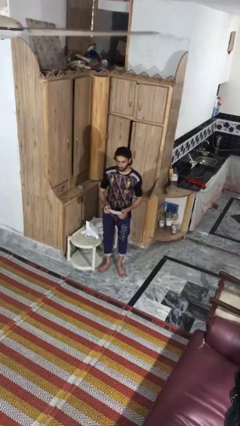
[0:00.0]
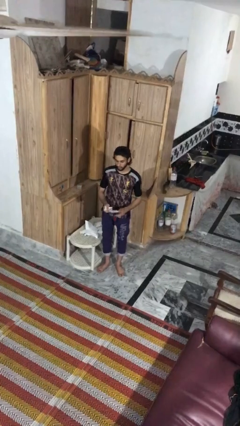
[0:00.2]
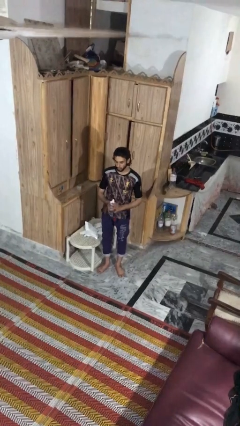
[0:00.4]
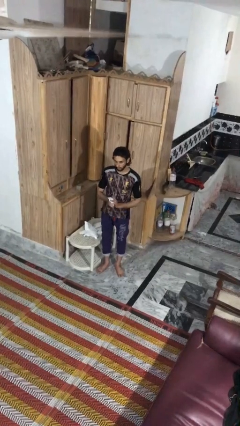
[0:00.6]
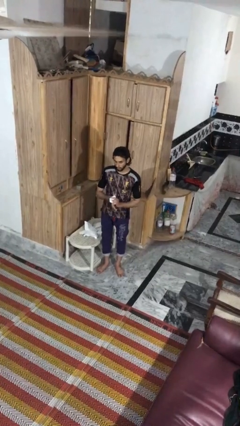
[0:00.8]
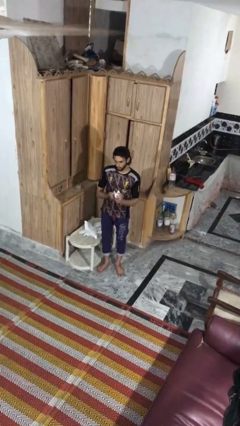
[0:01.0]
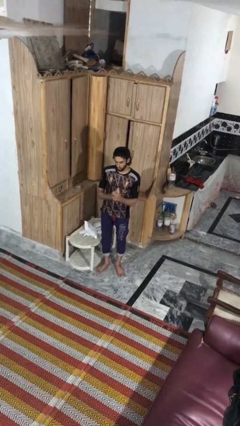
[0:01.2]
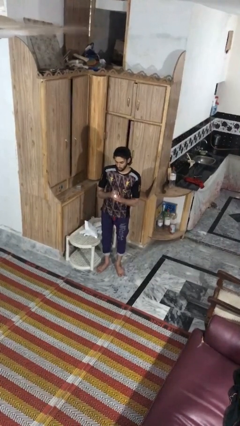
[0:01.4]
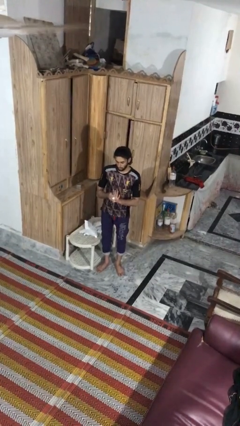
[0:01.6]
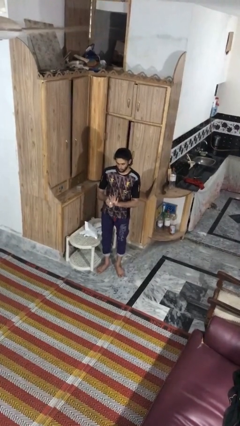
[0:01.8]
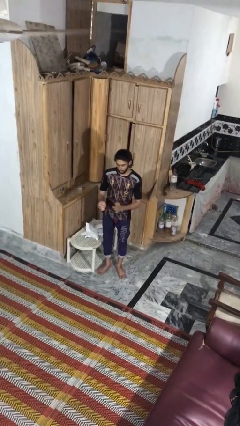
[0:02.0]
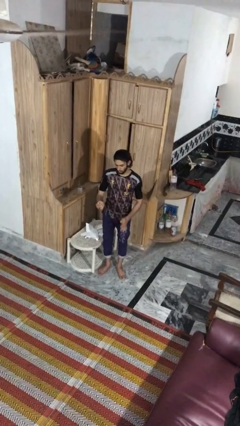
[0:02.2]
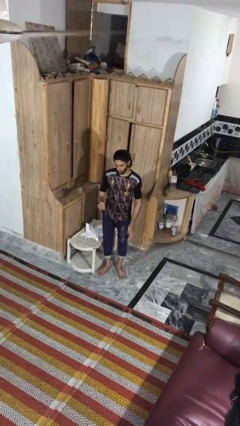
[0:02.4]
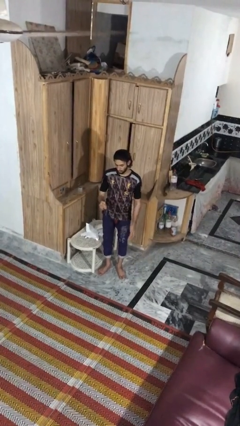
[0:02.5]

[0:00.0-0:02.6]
person crumples paper

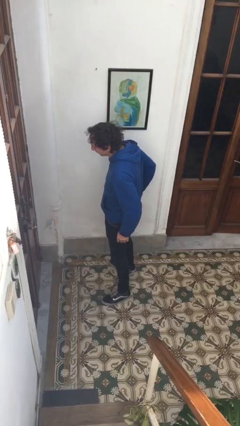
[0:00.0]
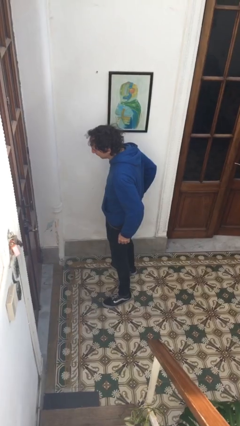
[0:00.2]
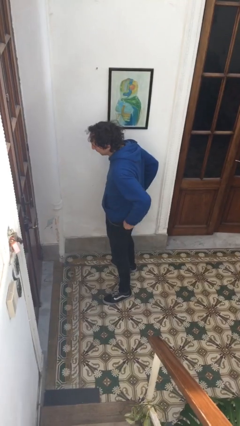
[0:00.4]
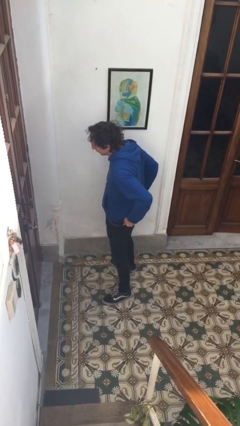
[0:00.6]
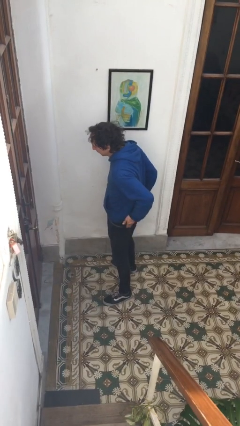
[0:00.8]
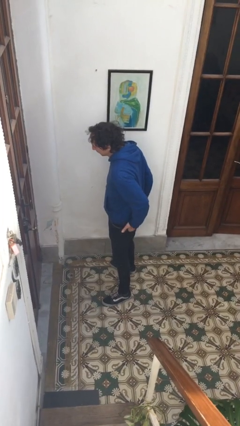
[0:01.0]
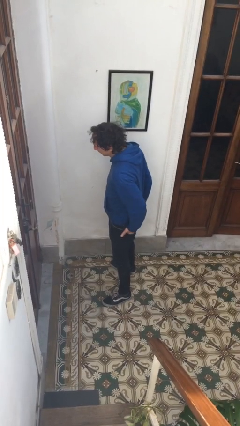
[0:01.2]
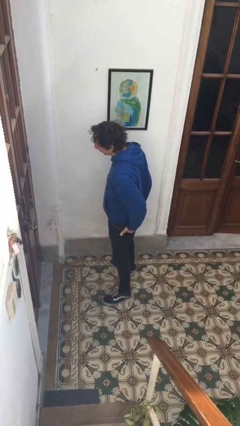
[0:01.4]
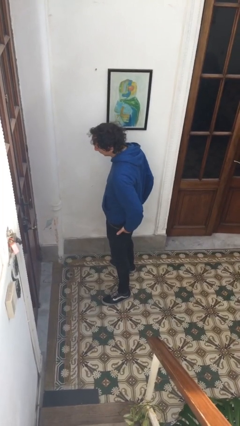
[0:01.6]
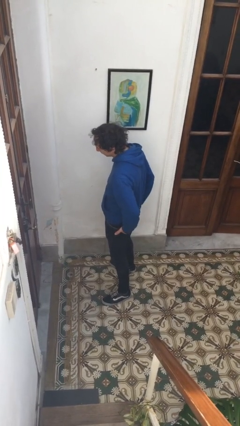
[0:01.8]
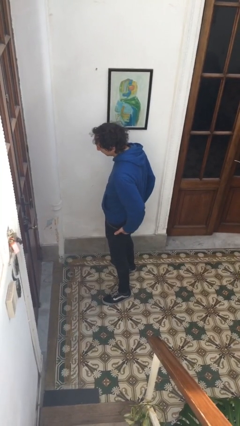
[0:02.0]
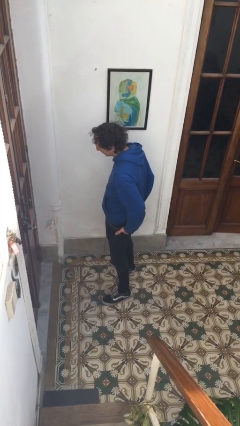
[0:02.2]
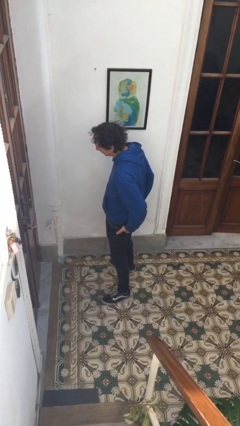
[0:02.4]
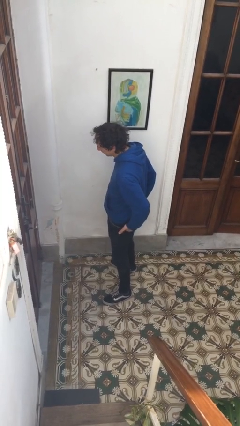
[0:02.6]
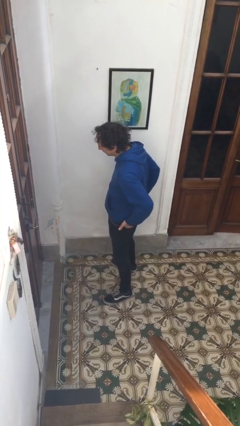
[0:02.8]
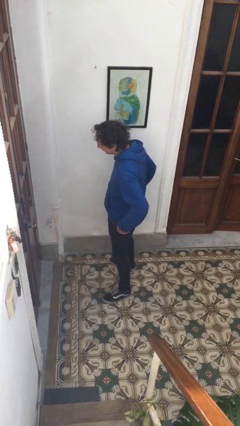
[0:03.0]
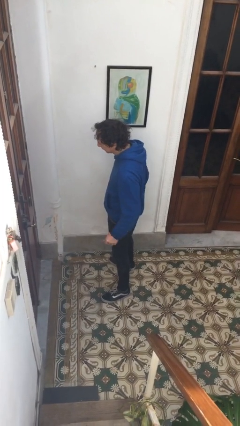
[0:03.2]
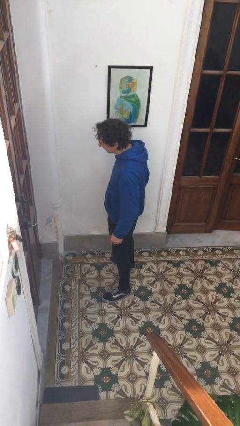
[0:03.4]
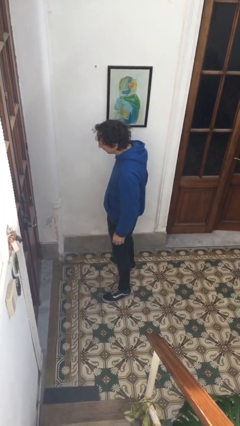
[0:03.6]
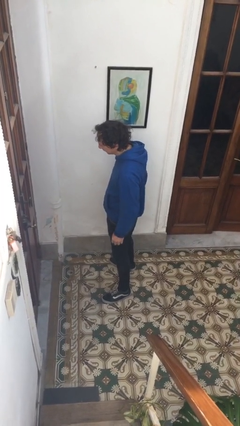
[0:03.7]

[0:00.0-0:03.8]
person puts hands in back pockets

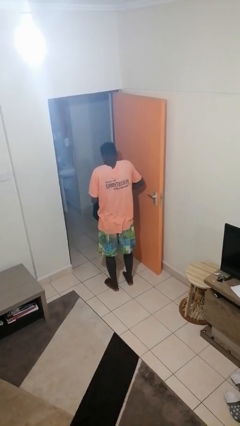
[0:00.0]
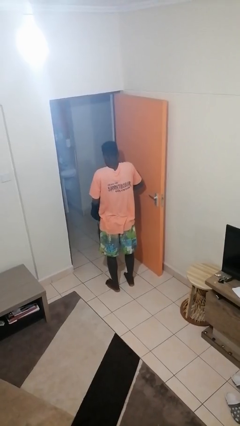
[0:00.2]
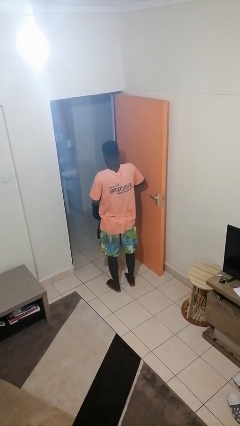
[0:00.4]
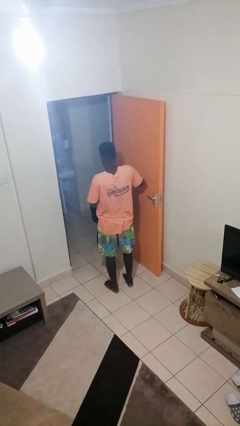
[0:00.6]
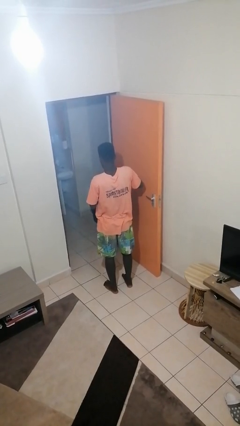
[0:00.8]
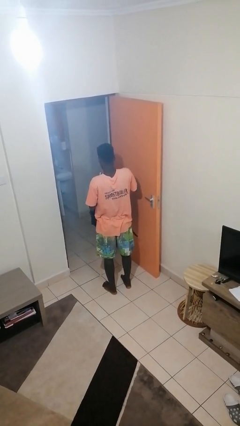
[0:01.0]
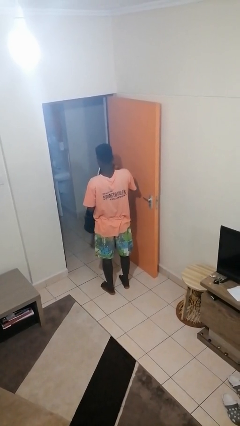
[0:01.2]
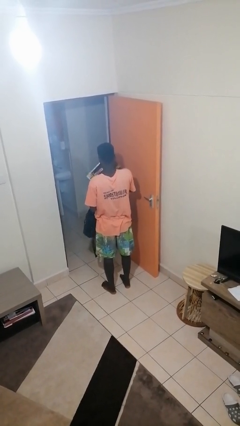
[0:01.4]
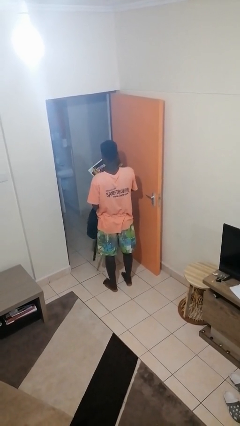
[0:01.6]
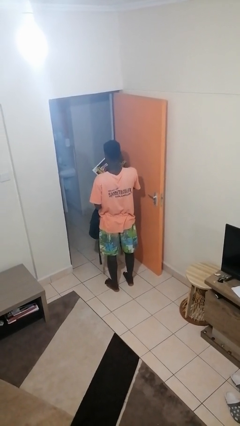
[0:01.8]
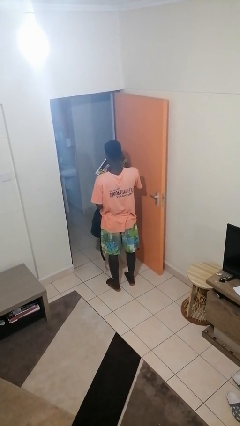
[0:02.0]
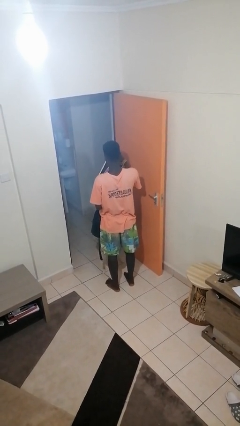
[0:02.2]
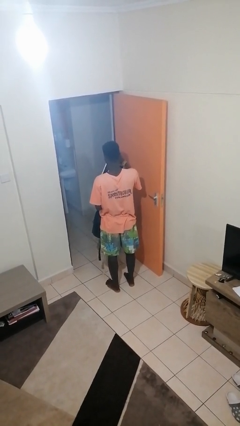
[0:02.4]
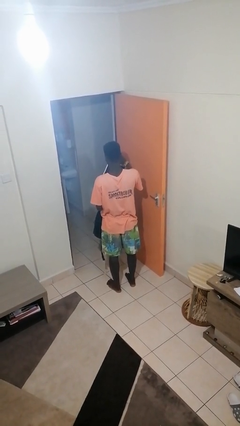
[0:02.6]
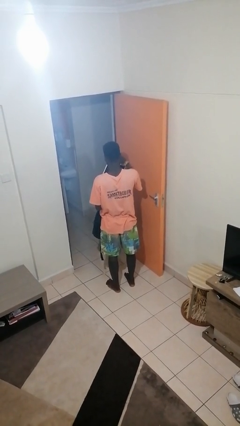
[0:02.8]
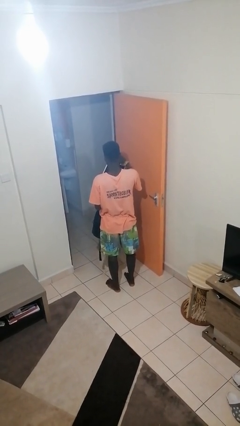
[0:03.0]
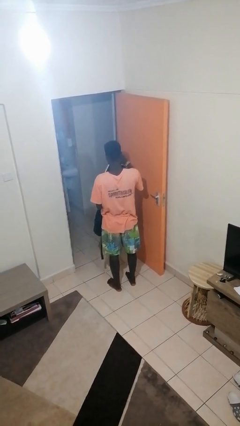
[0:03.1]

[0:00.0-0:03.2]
person takes object from backpack

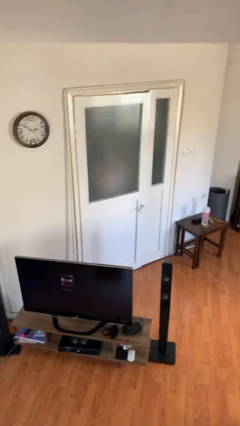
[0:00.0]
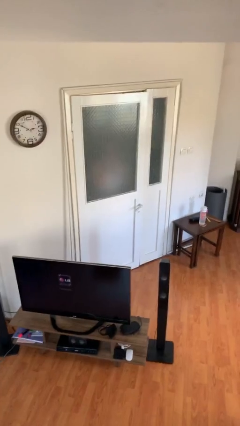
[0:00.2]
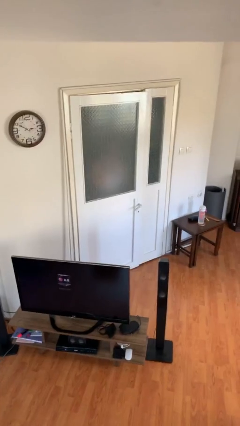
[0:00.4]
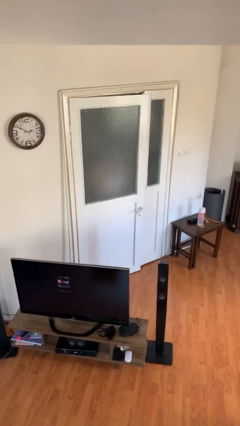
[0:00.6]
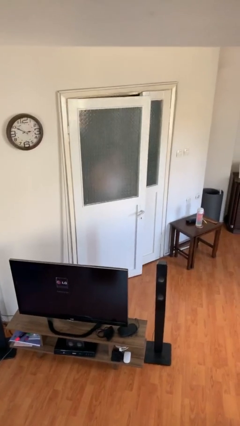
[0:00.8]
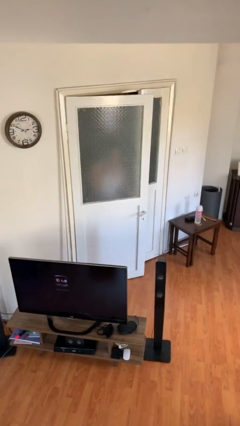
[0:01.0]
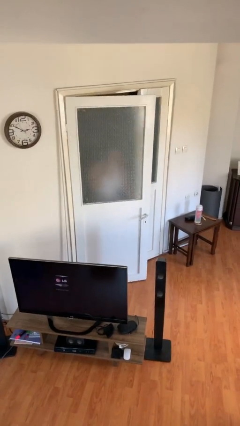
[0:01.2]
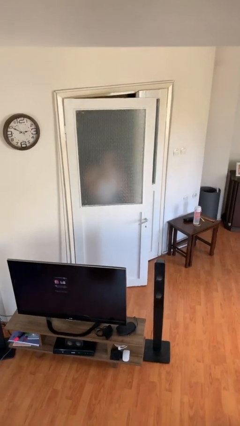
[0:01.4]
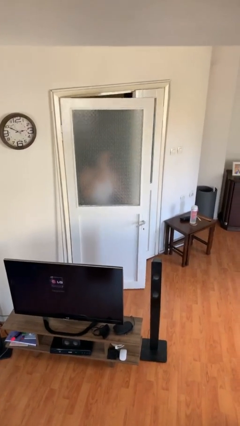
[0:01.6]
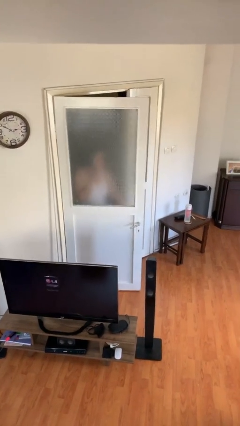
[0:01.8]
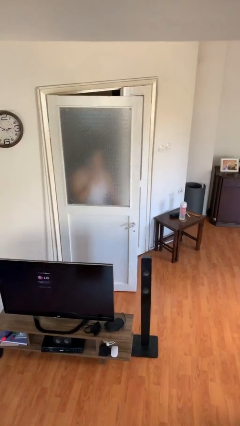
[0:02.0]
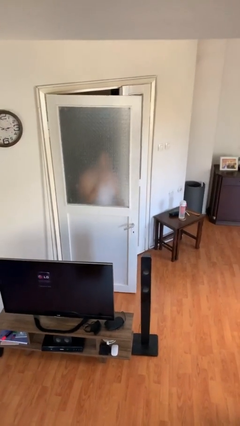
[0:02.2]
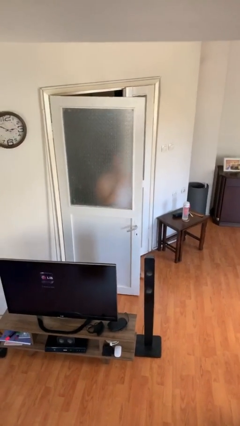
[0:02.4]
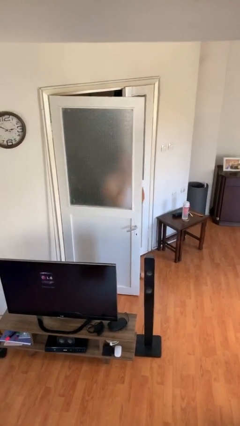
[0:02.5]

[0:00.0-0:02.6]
person opens facility door

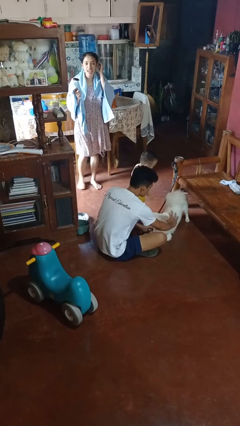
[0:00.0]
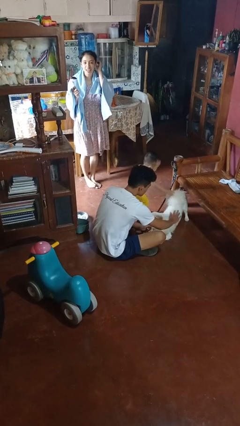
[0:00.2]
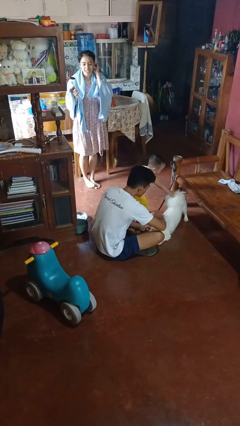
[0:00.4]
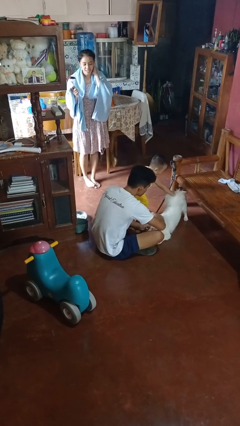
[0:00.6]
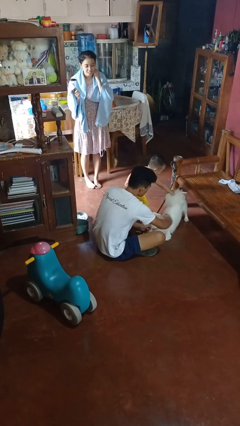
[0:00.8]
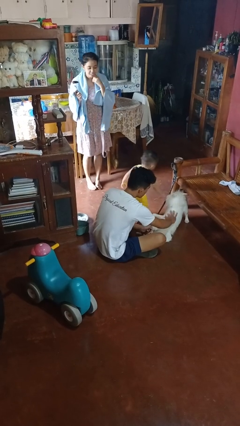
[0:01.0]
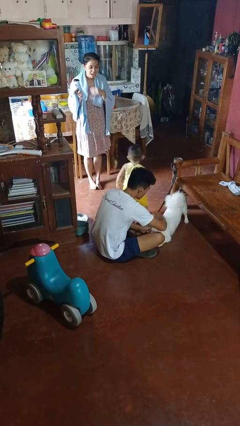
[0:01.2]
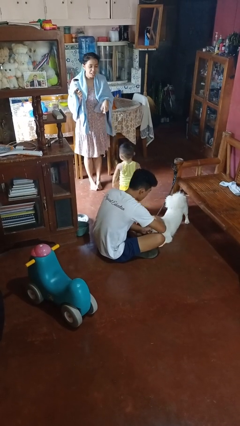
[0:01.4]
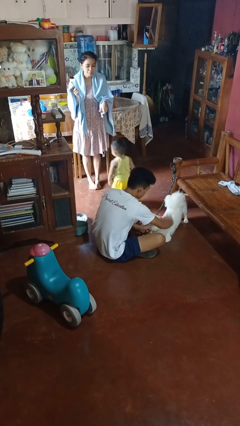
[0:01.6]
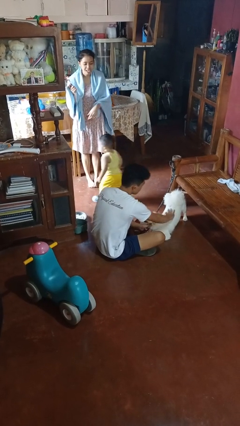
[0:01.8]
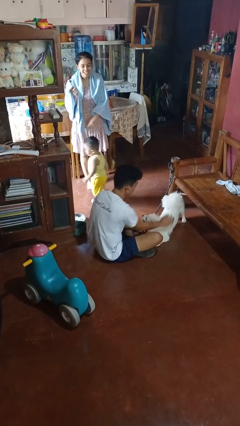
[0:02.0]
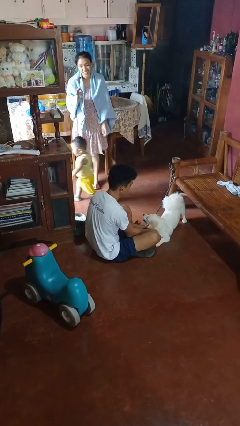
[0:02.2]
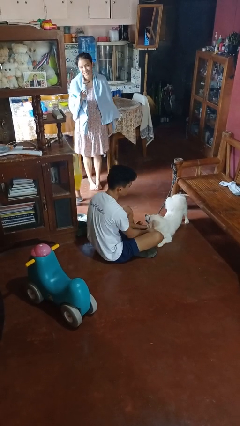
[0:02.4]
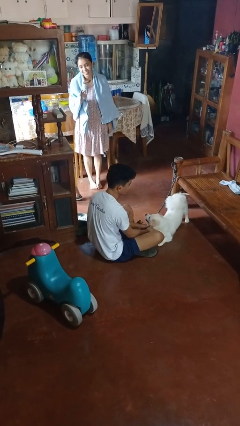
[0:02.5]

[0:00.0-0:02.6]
person pets dog

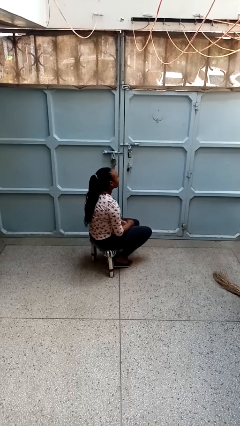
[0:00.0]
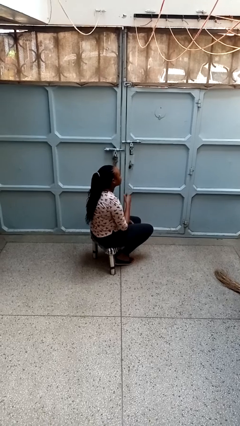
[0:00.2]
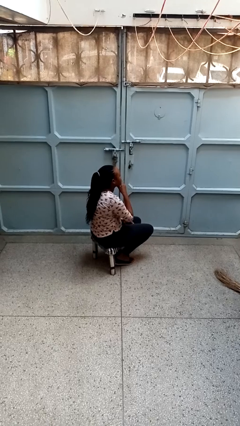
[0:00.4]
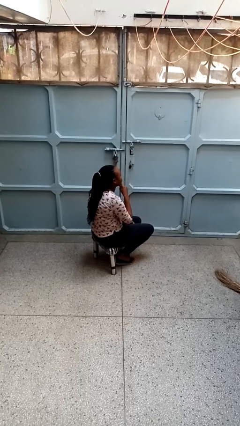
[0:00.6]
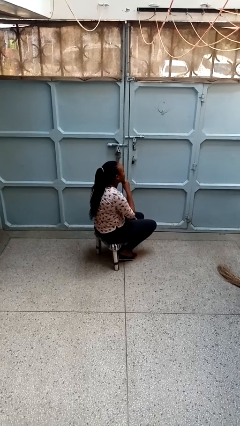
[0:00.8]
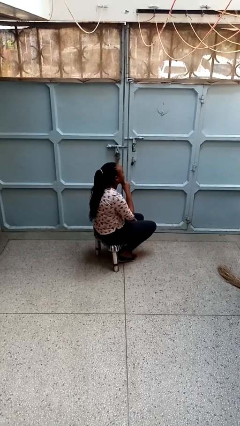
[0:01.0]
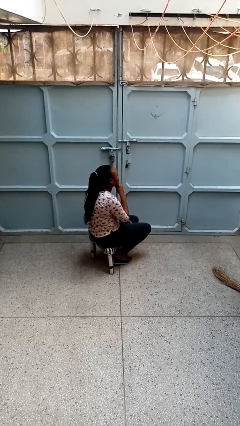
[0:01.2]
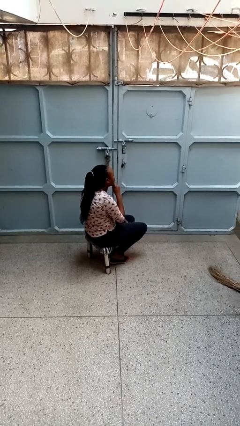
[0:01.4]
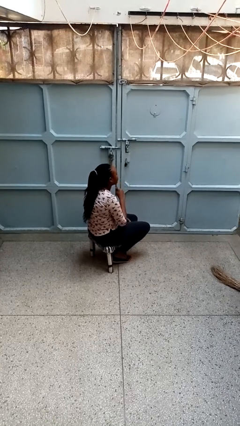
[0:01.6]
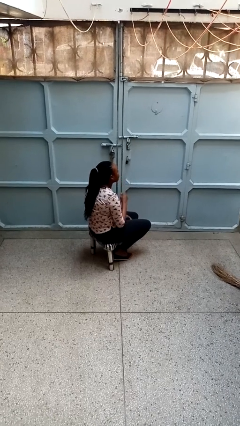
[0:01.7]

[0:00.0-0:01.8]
person strokes chin

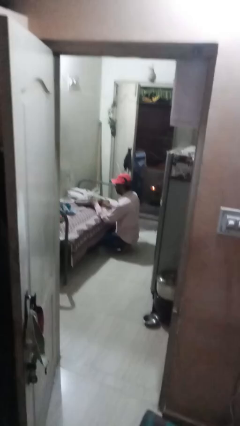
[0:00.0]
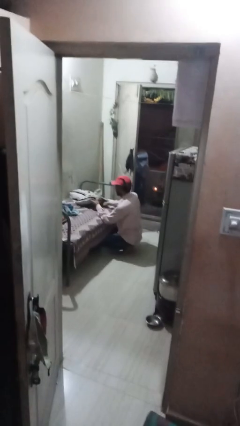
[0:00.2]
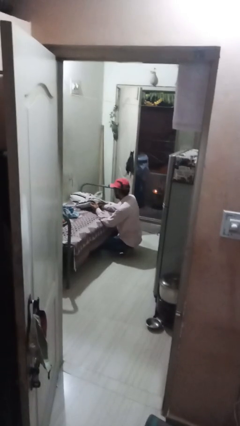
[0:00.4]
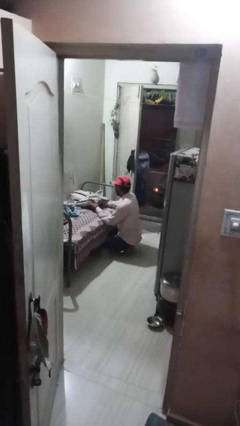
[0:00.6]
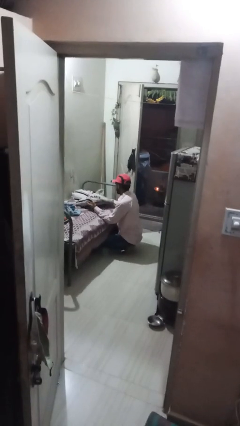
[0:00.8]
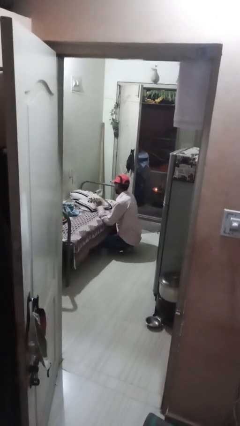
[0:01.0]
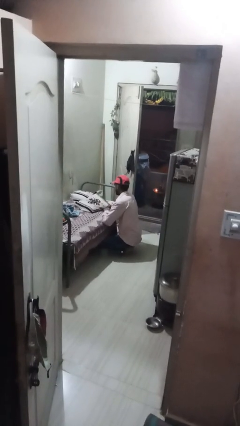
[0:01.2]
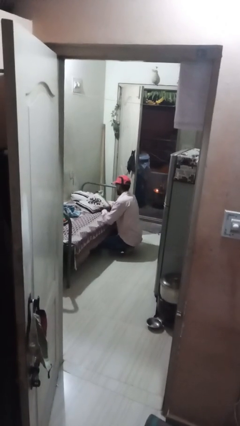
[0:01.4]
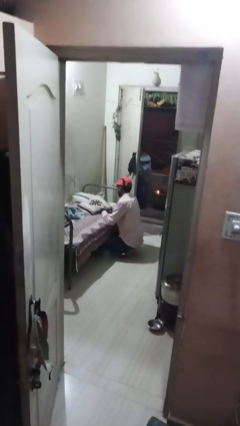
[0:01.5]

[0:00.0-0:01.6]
person searches in couch
